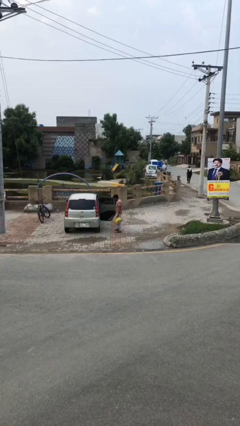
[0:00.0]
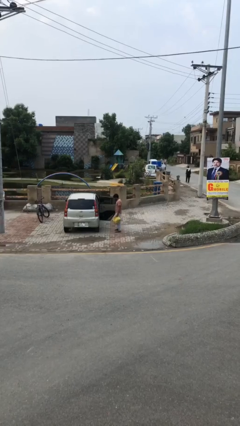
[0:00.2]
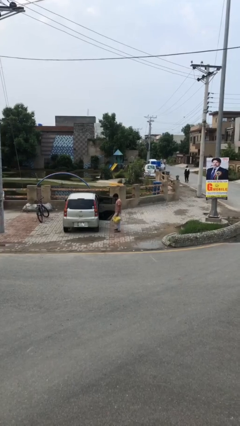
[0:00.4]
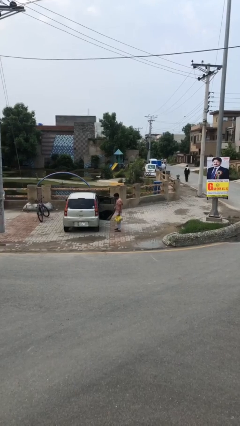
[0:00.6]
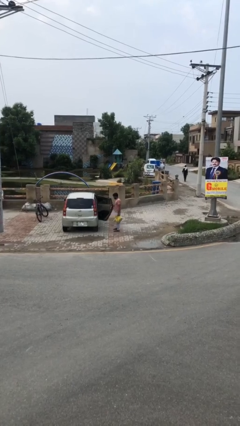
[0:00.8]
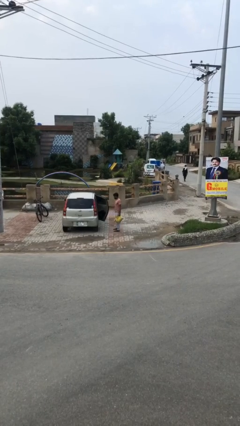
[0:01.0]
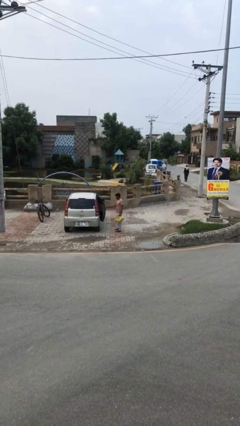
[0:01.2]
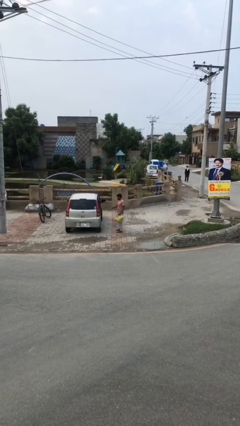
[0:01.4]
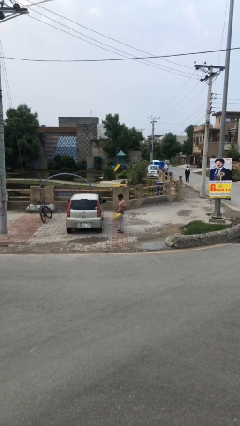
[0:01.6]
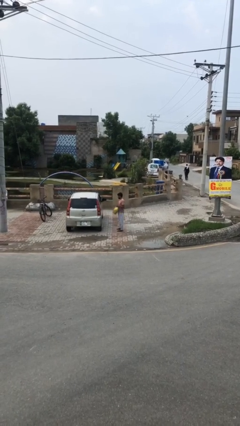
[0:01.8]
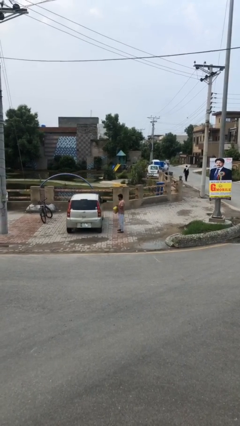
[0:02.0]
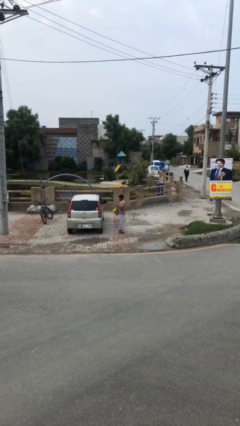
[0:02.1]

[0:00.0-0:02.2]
person closes car door

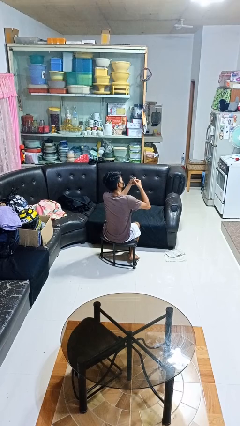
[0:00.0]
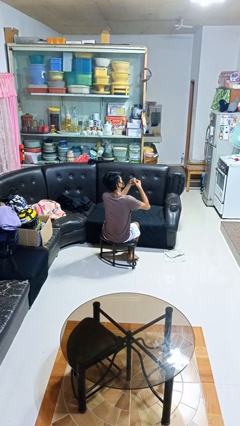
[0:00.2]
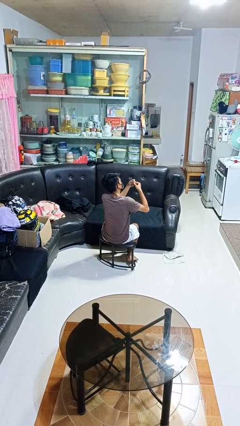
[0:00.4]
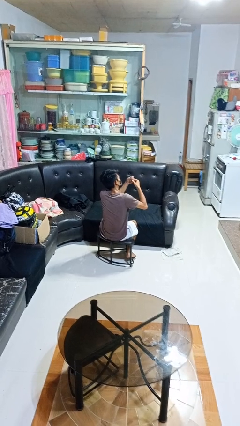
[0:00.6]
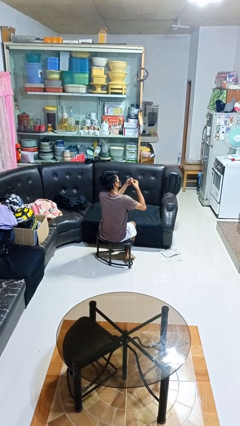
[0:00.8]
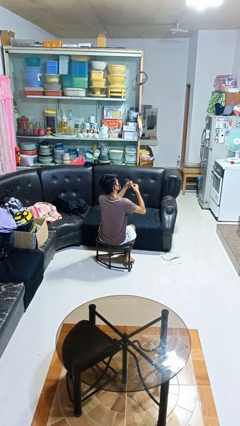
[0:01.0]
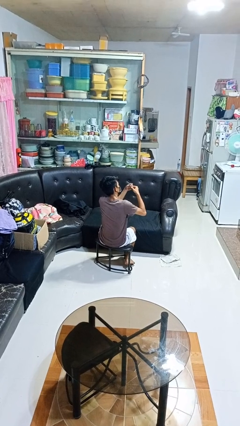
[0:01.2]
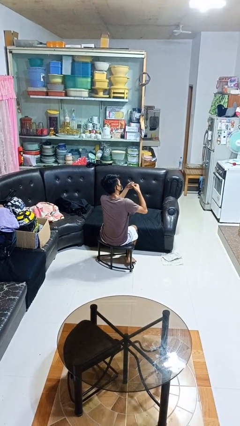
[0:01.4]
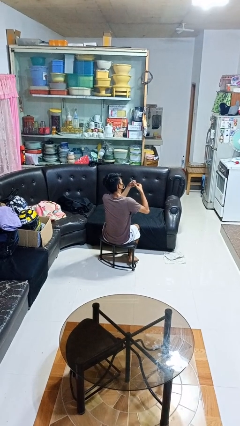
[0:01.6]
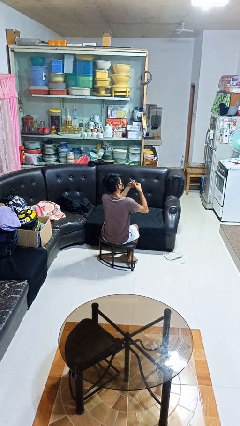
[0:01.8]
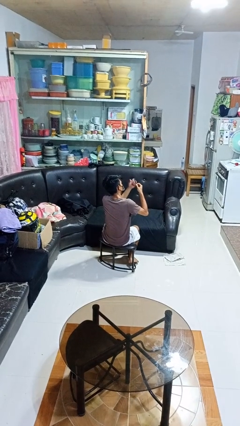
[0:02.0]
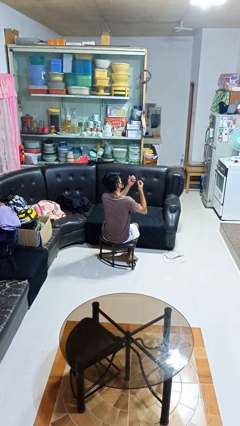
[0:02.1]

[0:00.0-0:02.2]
person files fingernails

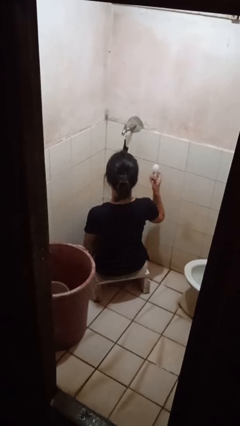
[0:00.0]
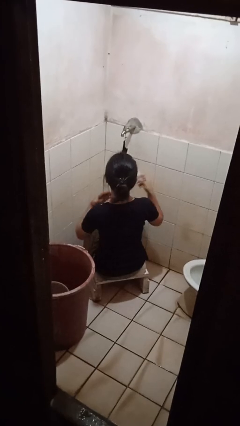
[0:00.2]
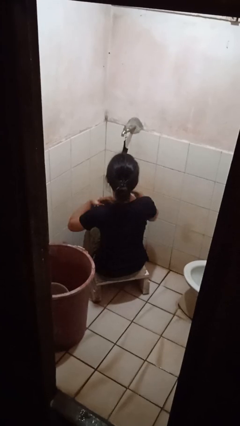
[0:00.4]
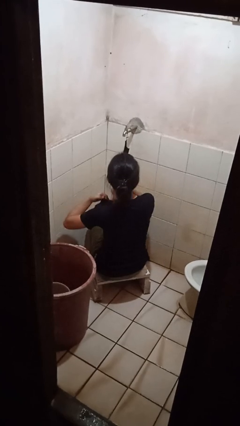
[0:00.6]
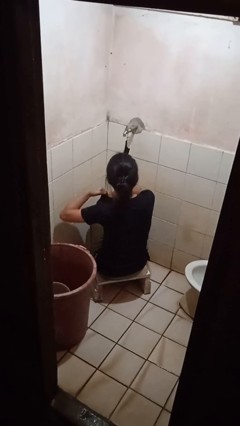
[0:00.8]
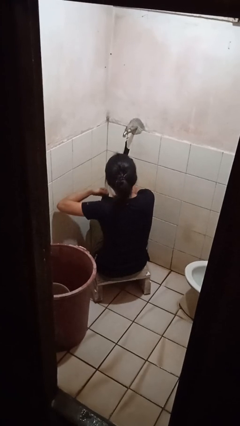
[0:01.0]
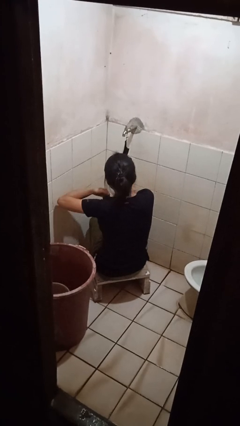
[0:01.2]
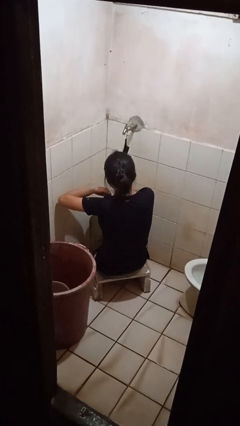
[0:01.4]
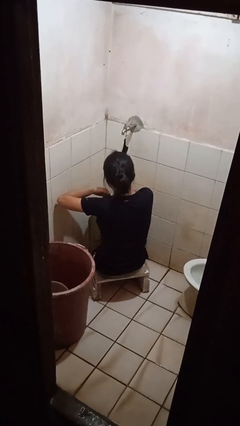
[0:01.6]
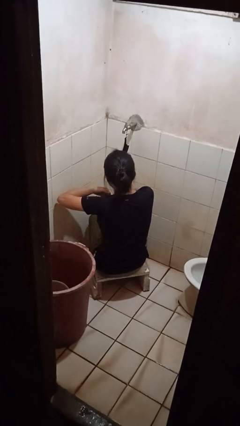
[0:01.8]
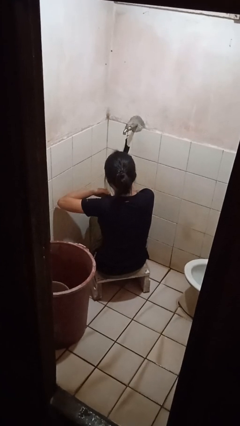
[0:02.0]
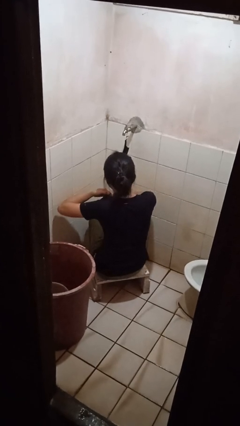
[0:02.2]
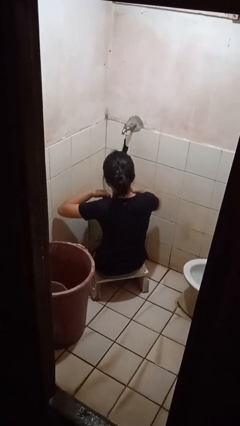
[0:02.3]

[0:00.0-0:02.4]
person applies deodorant

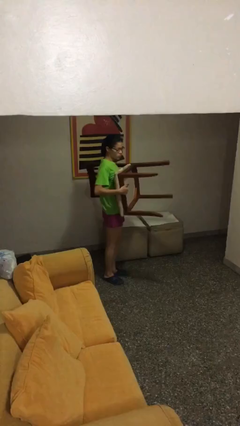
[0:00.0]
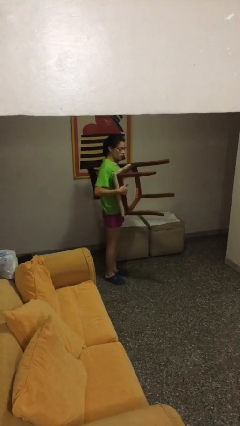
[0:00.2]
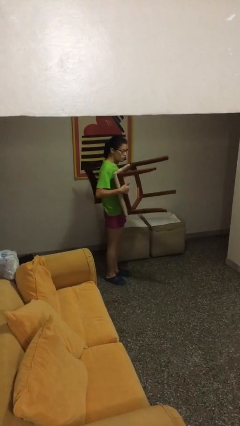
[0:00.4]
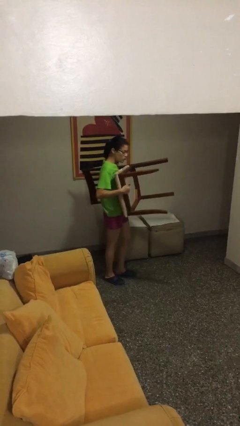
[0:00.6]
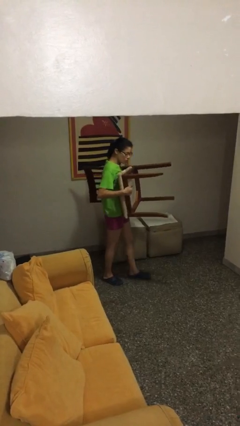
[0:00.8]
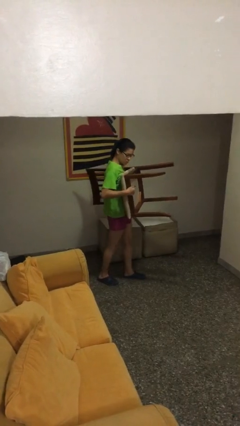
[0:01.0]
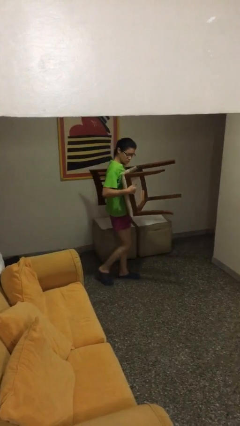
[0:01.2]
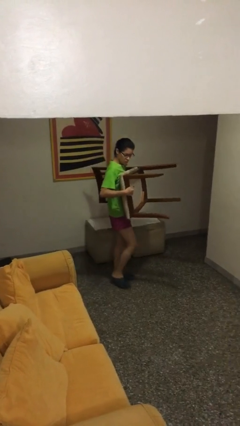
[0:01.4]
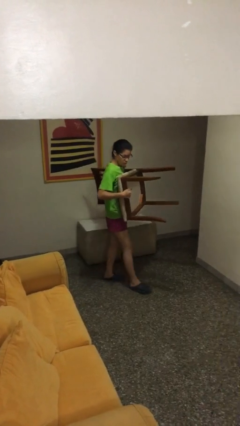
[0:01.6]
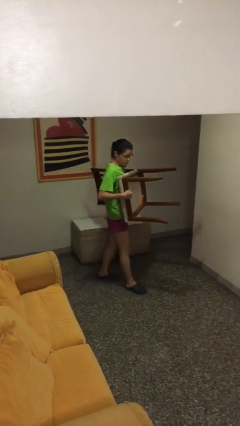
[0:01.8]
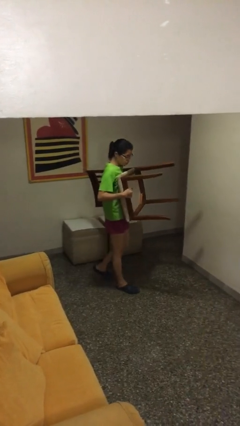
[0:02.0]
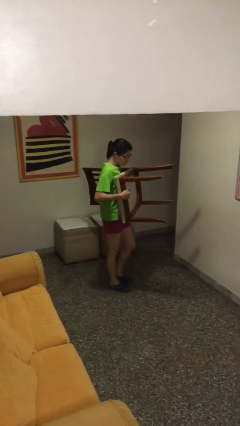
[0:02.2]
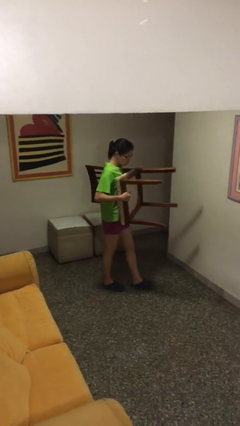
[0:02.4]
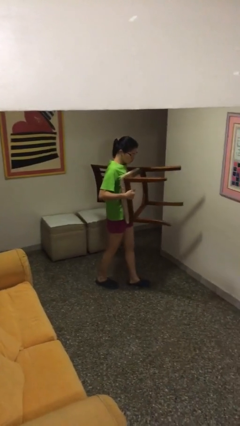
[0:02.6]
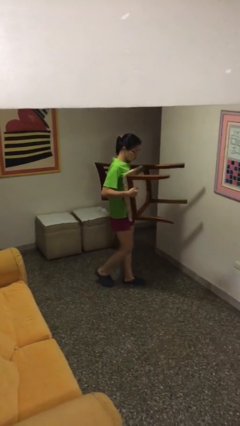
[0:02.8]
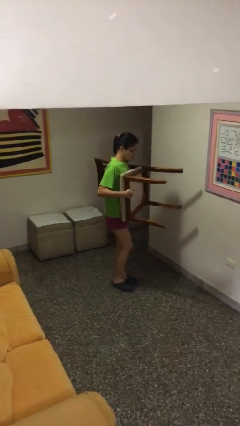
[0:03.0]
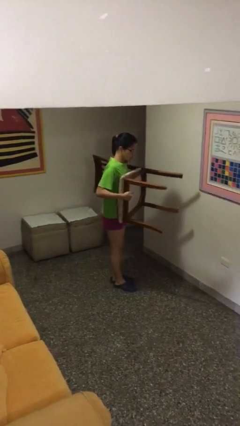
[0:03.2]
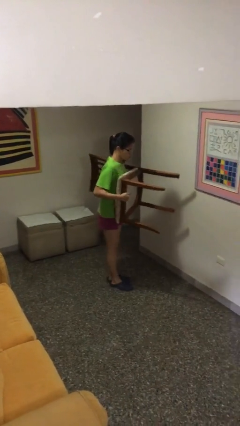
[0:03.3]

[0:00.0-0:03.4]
person carries heavy object

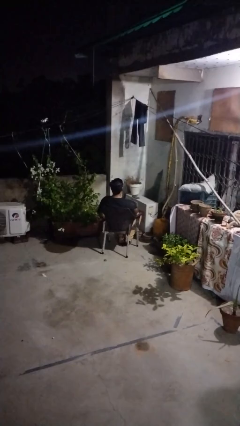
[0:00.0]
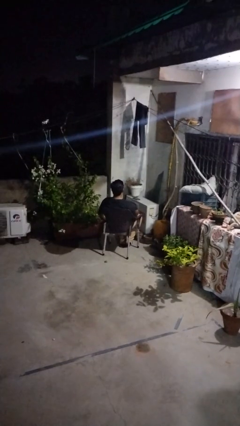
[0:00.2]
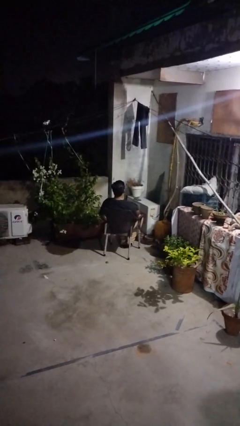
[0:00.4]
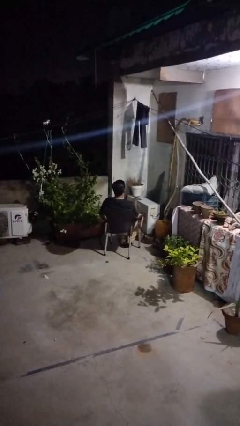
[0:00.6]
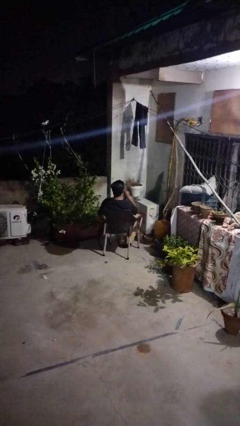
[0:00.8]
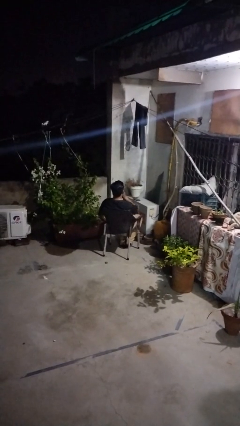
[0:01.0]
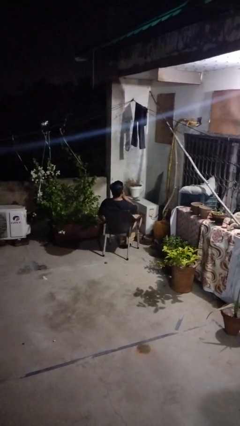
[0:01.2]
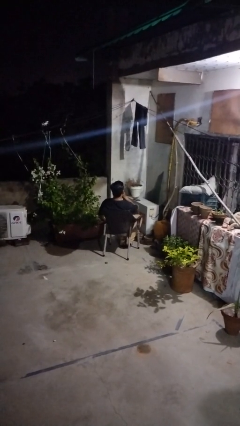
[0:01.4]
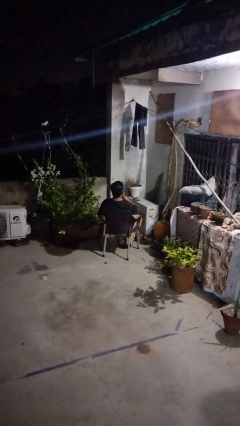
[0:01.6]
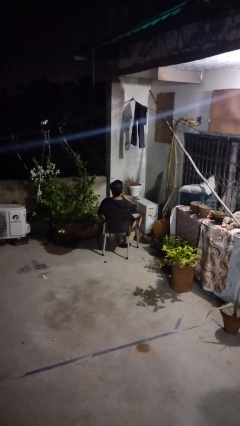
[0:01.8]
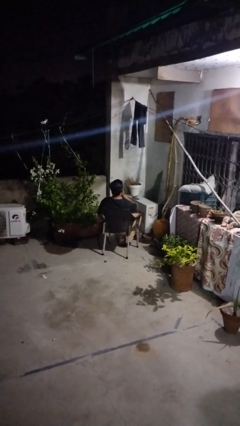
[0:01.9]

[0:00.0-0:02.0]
person gestures be quiet

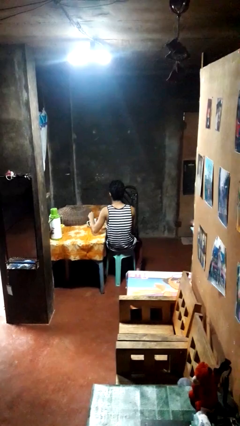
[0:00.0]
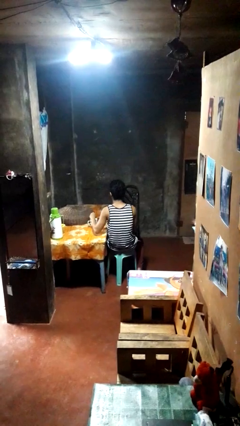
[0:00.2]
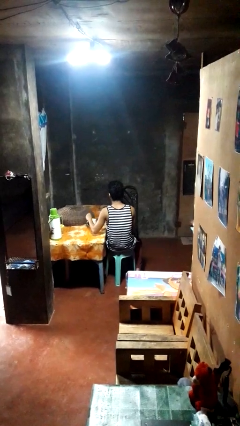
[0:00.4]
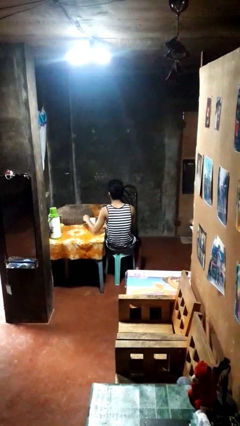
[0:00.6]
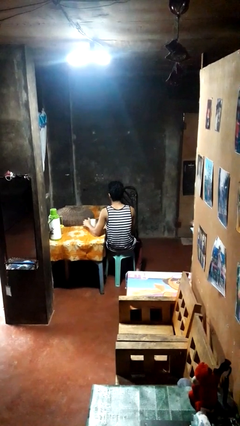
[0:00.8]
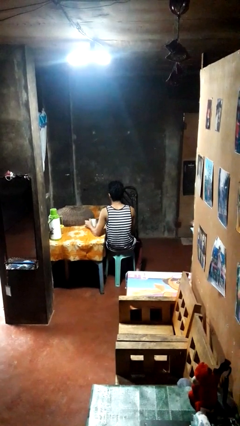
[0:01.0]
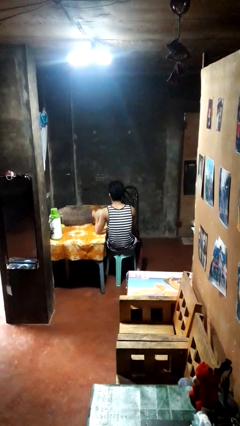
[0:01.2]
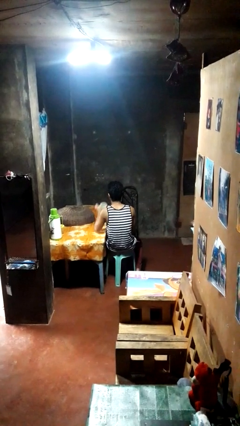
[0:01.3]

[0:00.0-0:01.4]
person stirs mug

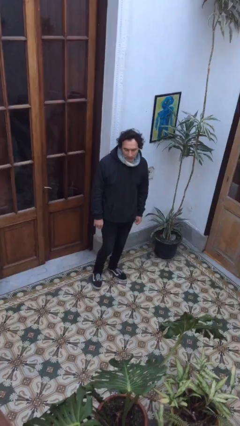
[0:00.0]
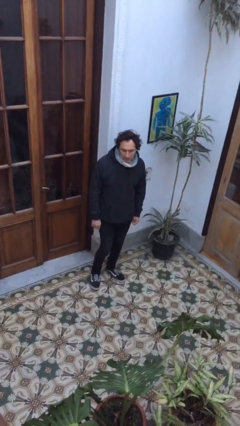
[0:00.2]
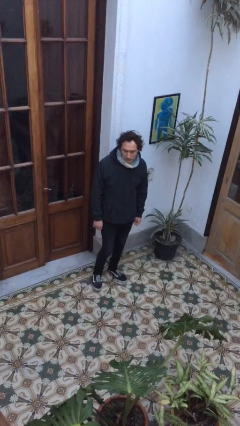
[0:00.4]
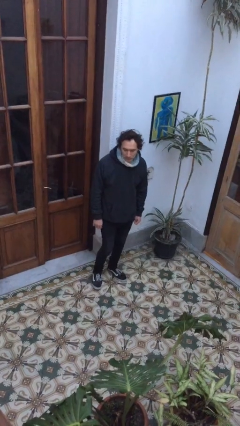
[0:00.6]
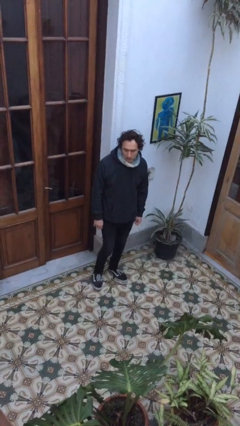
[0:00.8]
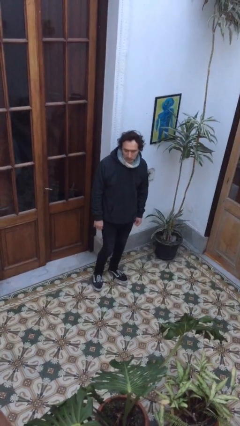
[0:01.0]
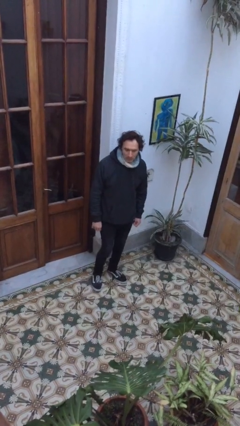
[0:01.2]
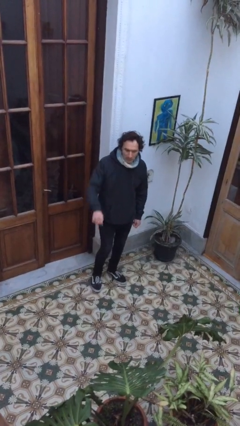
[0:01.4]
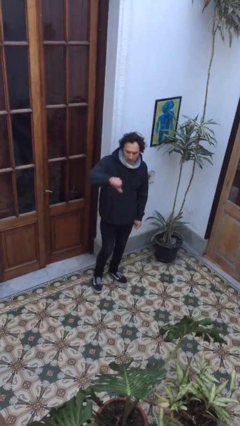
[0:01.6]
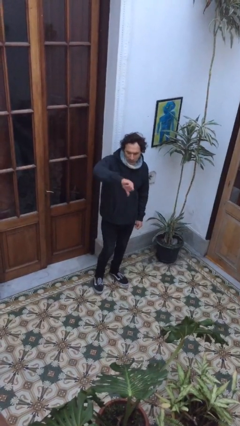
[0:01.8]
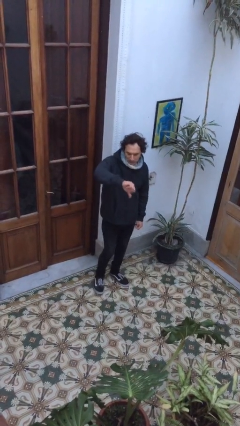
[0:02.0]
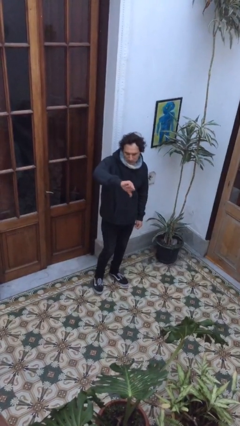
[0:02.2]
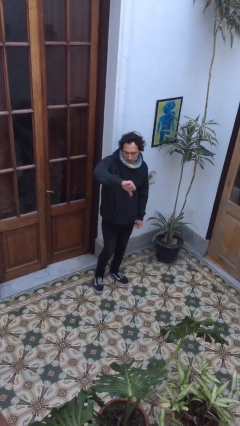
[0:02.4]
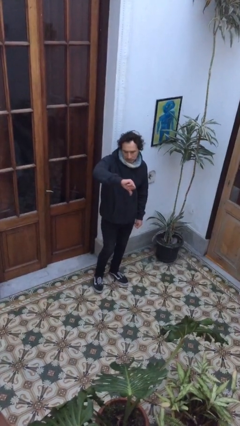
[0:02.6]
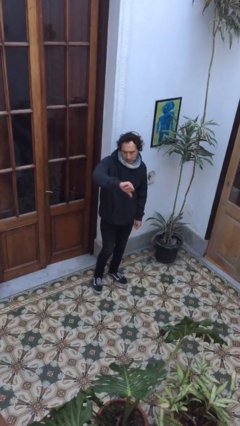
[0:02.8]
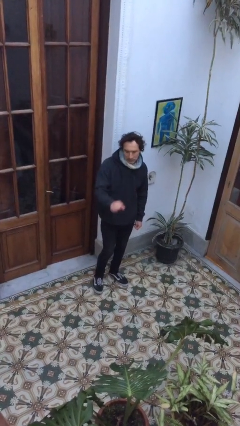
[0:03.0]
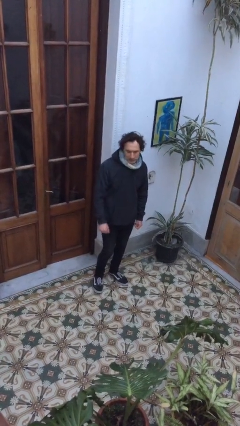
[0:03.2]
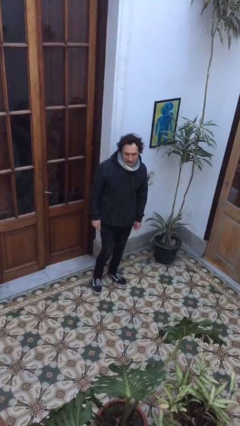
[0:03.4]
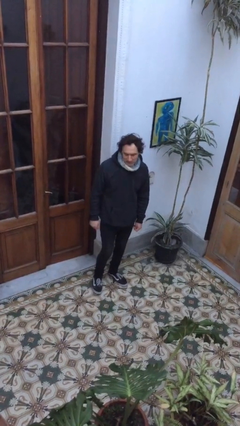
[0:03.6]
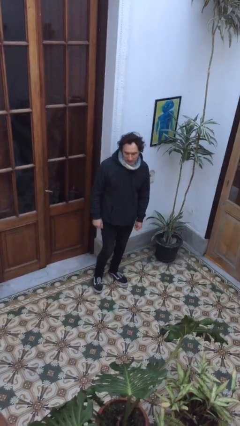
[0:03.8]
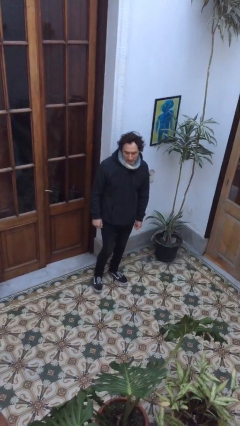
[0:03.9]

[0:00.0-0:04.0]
person gestures thumbs down
